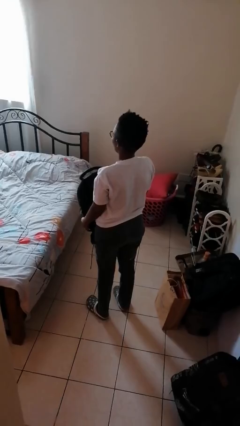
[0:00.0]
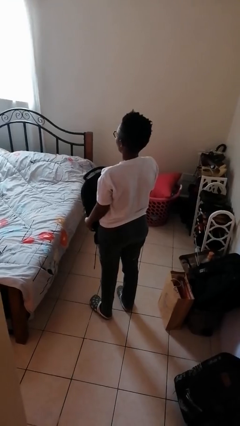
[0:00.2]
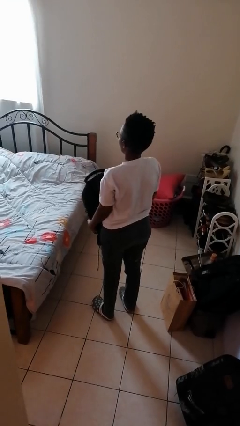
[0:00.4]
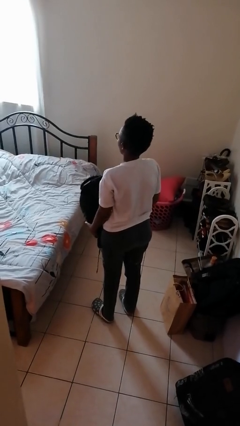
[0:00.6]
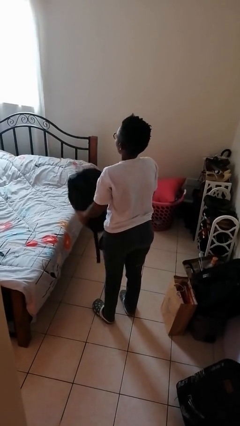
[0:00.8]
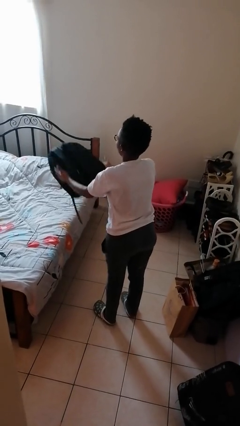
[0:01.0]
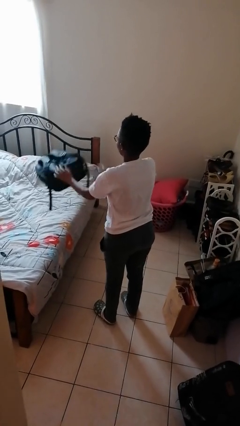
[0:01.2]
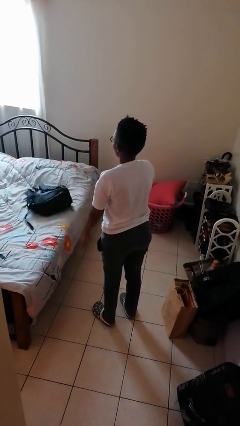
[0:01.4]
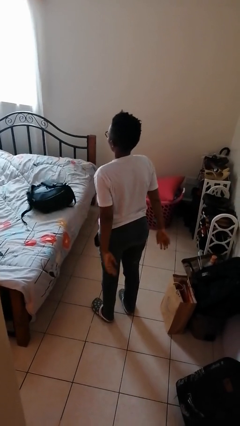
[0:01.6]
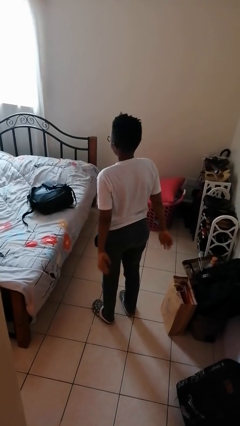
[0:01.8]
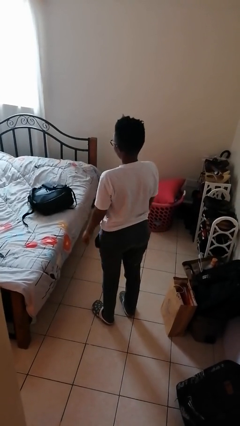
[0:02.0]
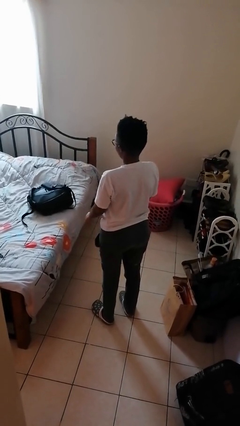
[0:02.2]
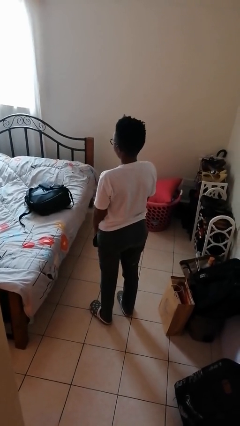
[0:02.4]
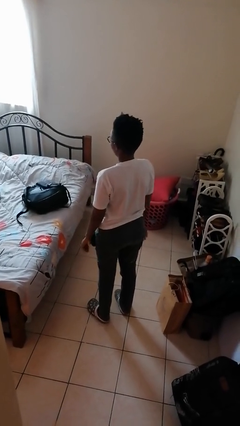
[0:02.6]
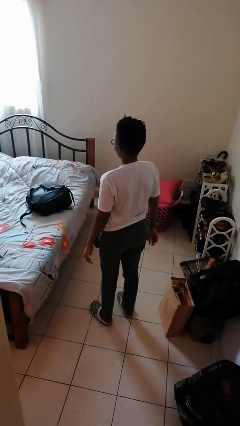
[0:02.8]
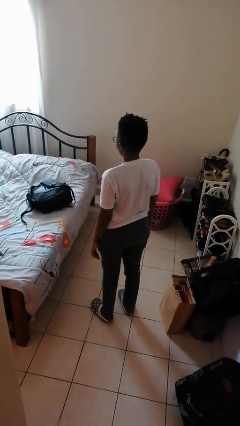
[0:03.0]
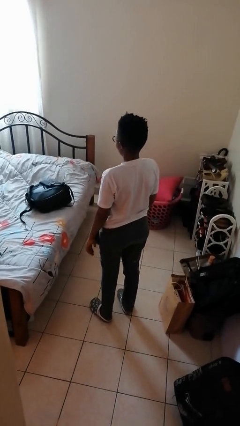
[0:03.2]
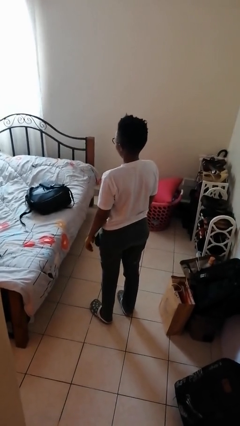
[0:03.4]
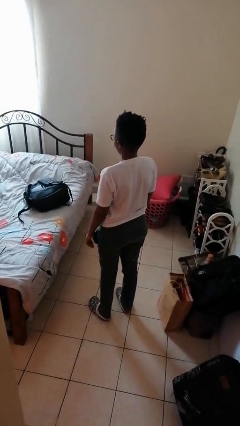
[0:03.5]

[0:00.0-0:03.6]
person throws object on bed

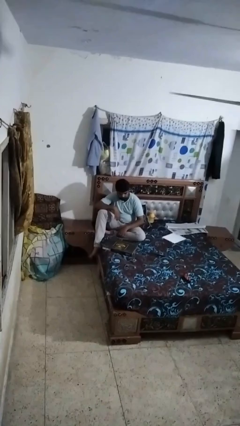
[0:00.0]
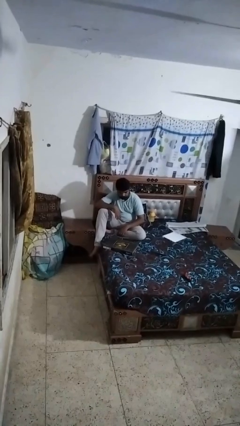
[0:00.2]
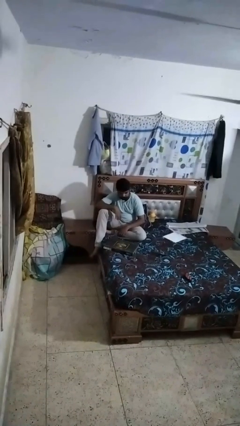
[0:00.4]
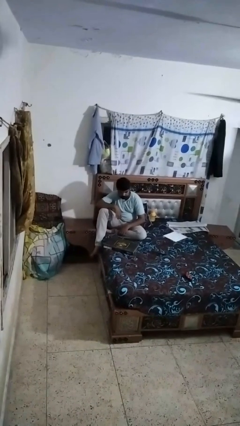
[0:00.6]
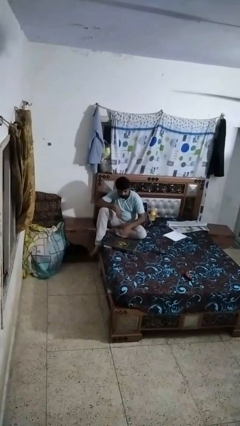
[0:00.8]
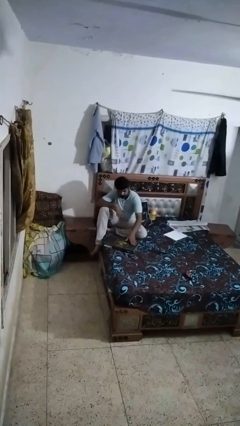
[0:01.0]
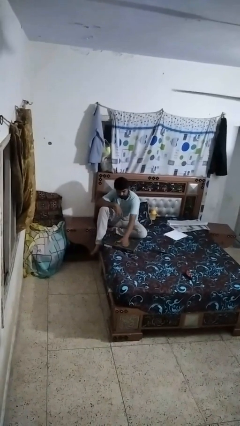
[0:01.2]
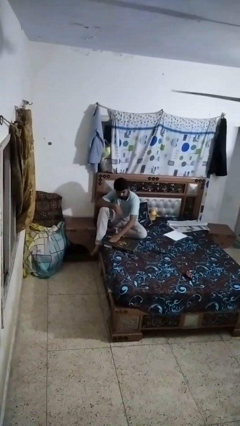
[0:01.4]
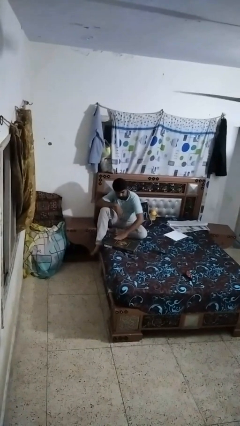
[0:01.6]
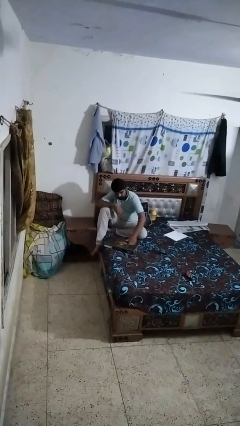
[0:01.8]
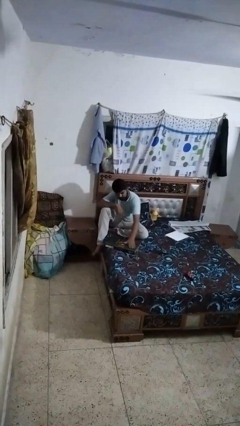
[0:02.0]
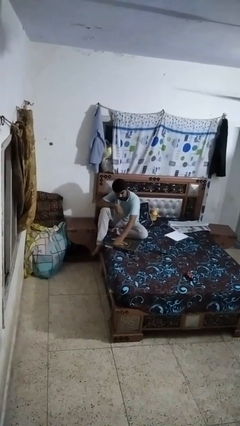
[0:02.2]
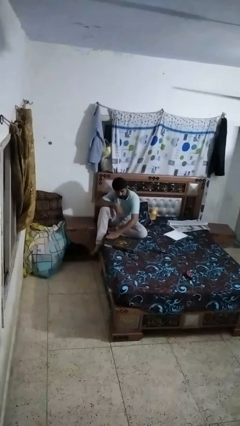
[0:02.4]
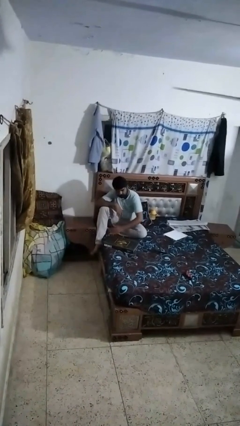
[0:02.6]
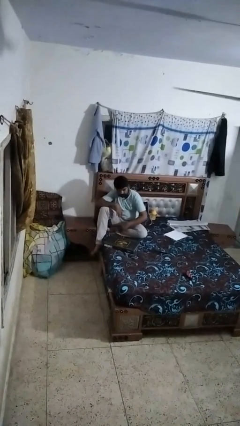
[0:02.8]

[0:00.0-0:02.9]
person waves hand over object

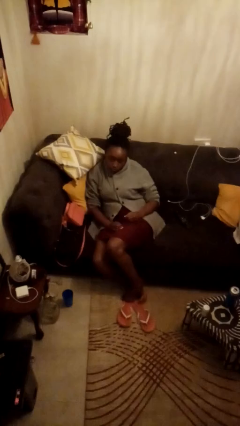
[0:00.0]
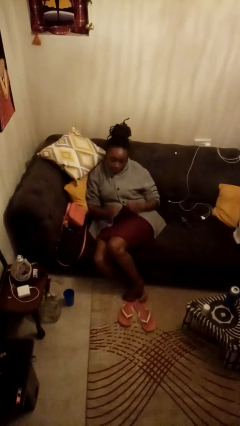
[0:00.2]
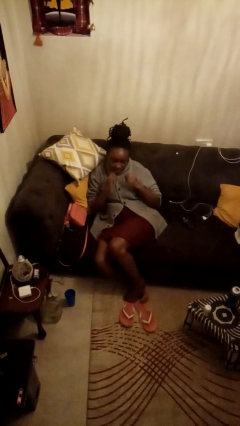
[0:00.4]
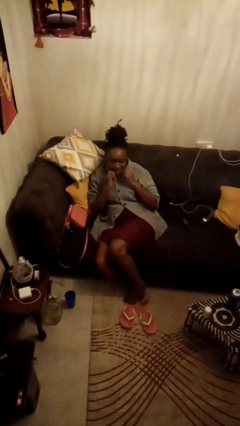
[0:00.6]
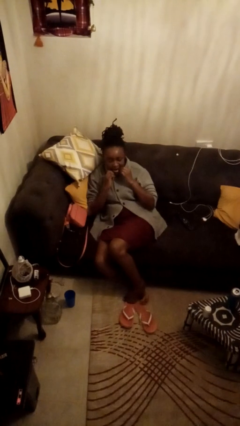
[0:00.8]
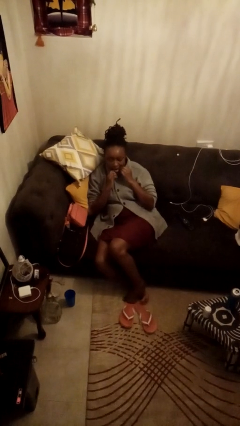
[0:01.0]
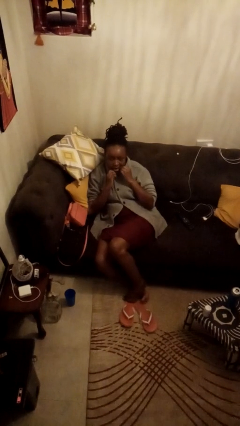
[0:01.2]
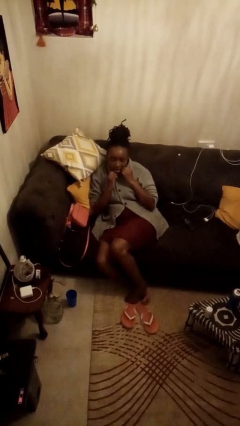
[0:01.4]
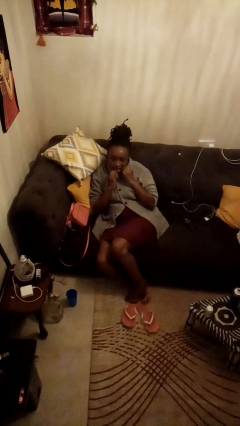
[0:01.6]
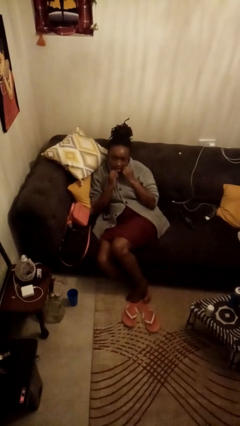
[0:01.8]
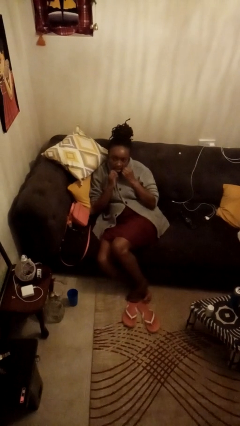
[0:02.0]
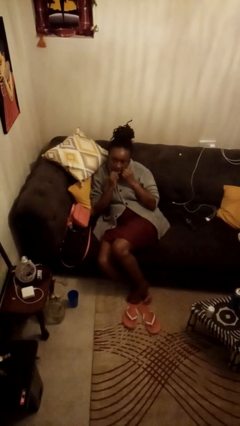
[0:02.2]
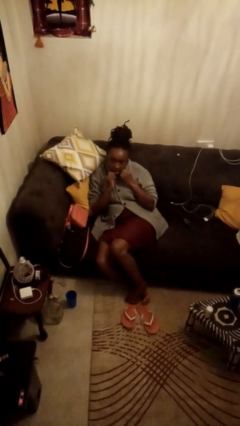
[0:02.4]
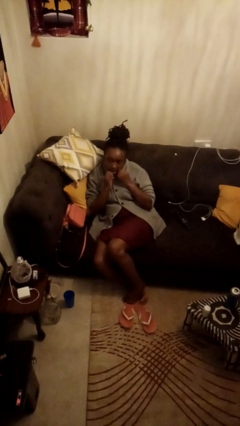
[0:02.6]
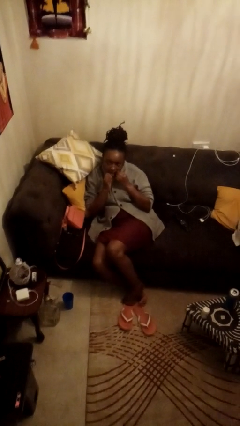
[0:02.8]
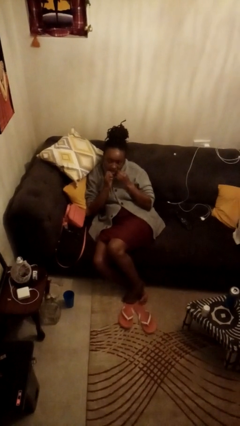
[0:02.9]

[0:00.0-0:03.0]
person flosses

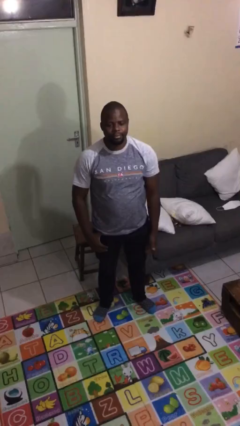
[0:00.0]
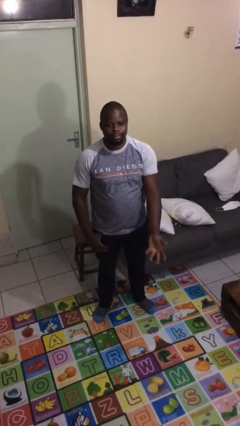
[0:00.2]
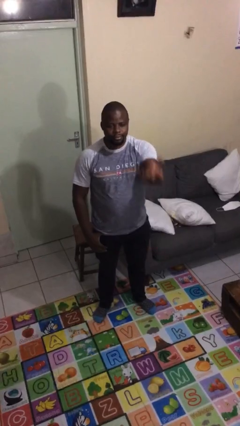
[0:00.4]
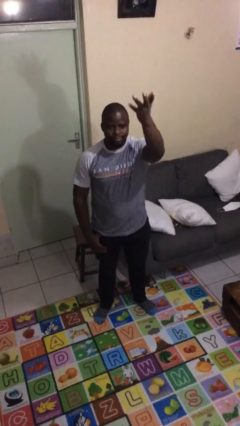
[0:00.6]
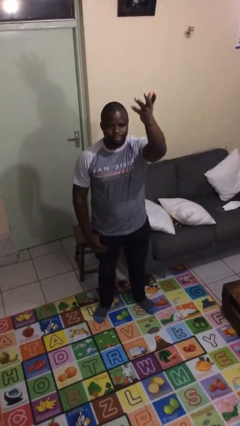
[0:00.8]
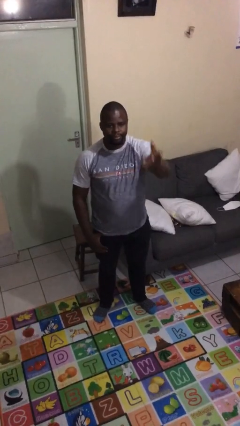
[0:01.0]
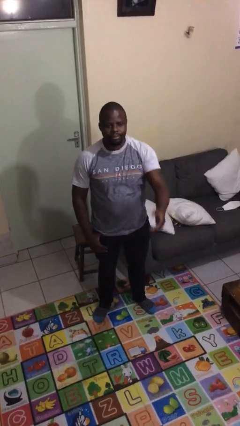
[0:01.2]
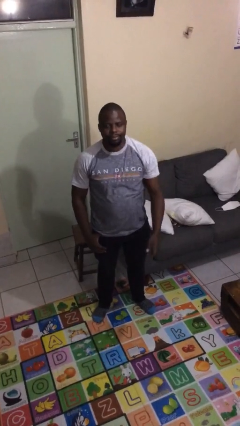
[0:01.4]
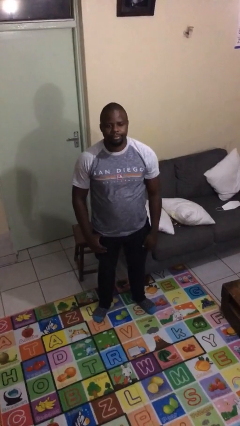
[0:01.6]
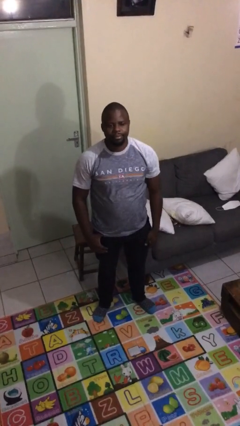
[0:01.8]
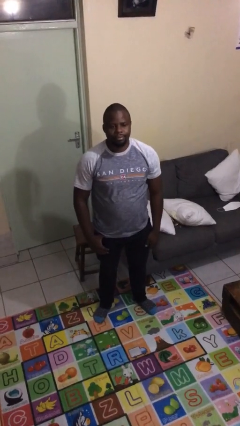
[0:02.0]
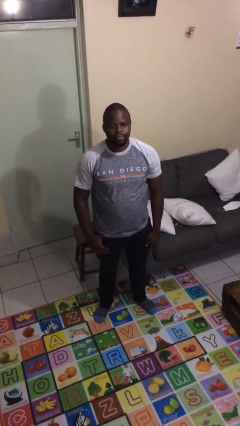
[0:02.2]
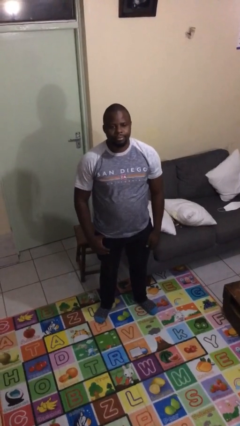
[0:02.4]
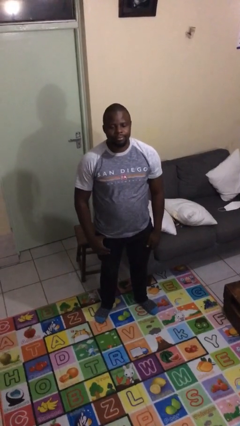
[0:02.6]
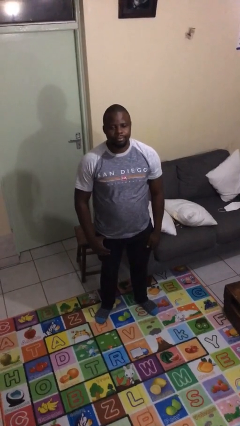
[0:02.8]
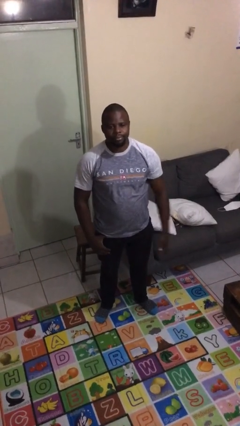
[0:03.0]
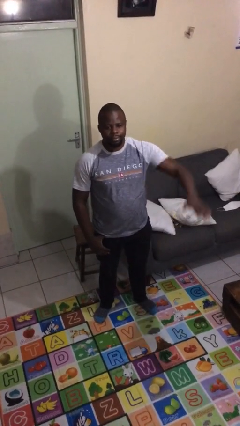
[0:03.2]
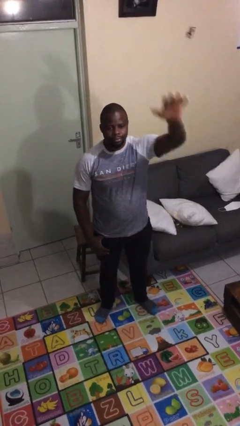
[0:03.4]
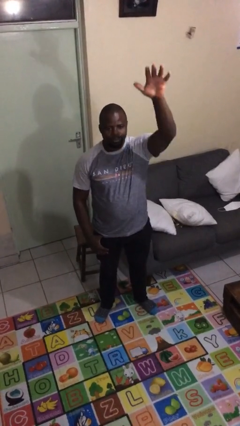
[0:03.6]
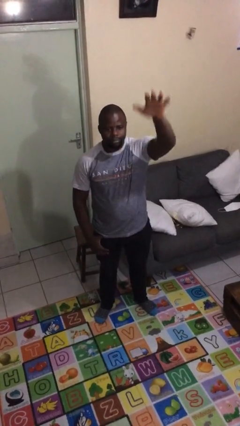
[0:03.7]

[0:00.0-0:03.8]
person gestures swipe up

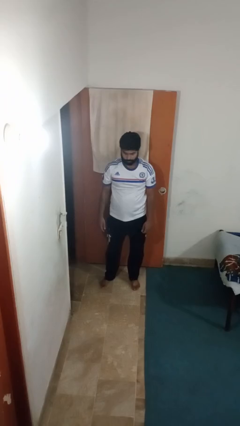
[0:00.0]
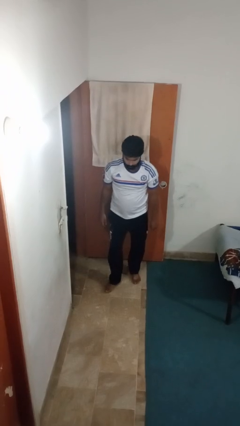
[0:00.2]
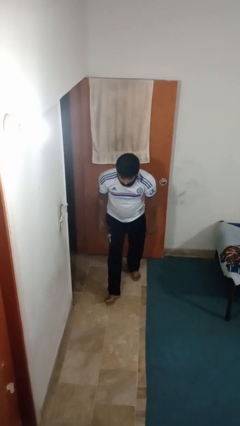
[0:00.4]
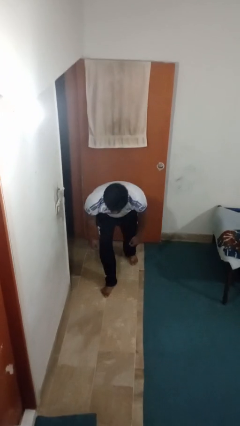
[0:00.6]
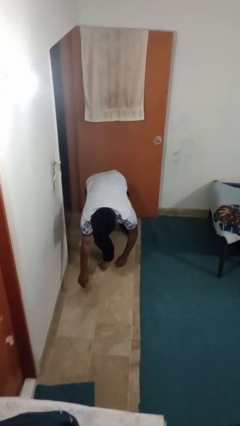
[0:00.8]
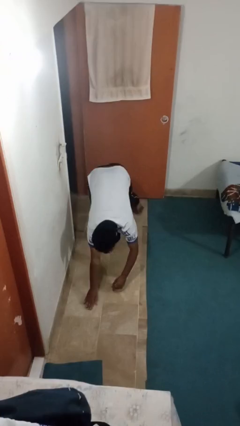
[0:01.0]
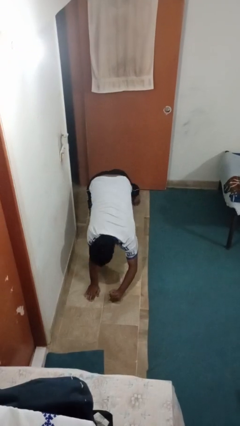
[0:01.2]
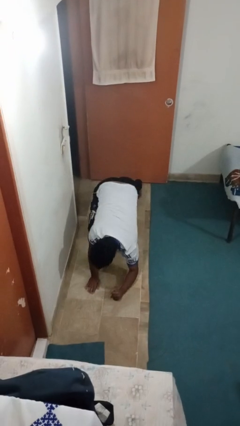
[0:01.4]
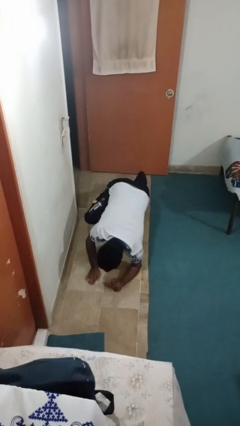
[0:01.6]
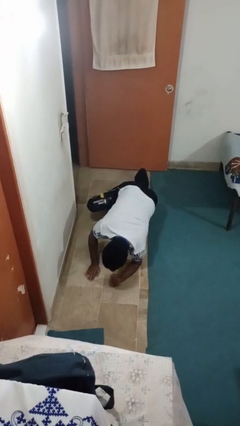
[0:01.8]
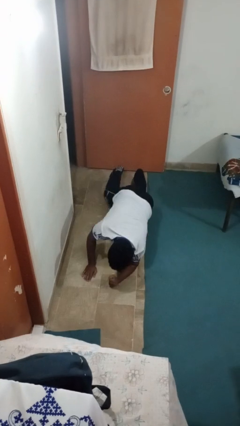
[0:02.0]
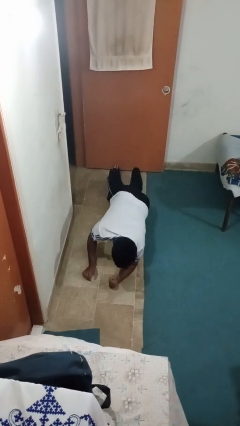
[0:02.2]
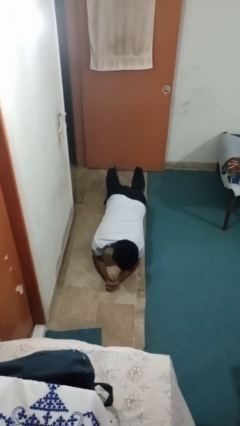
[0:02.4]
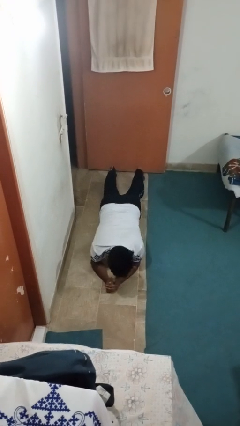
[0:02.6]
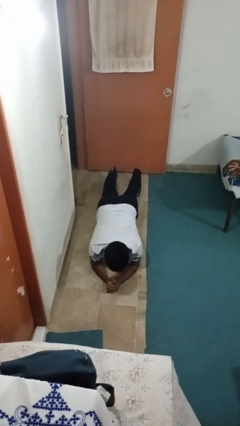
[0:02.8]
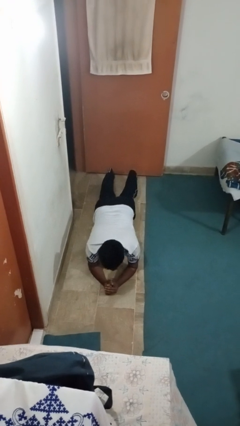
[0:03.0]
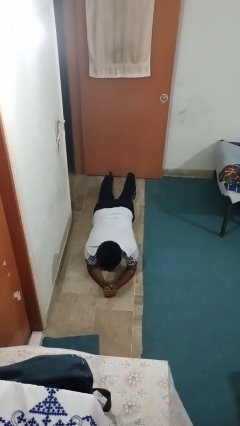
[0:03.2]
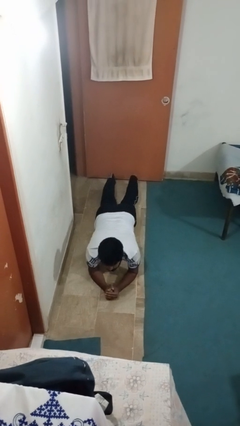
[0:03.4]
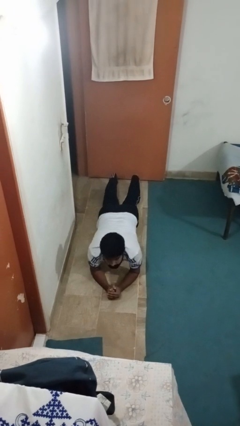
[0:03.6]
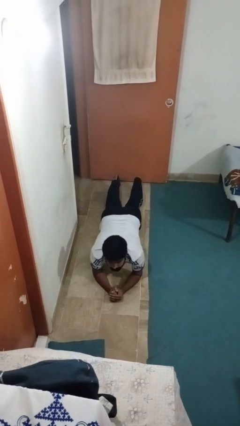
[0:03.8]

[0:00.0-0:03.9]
person exercises with plank

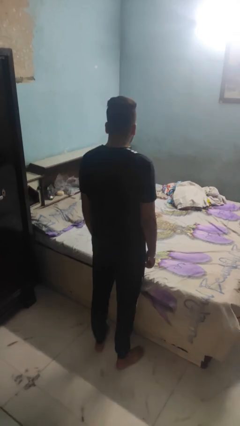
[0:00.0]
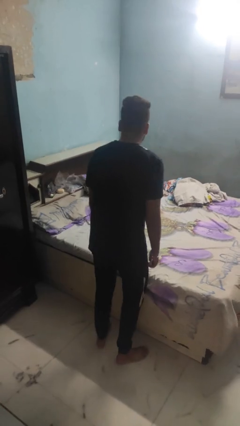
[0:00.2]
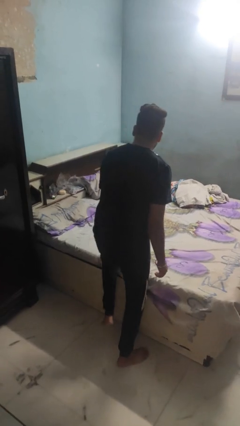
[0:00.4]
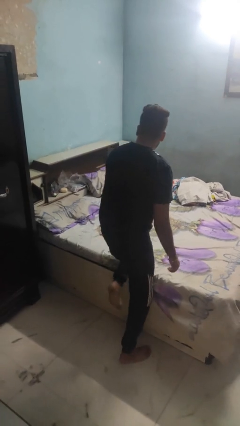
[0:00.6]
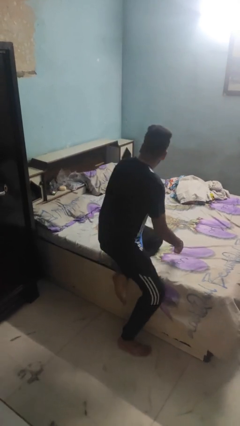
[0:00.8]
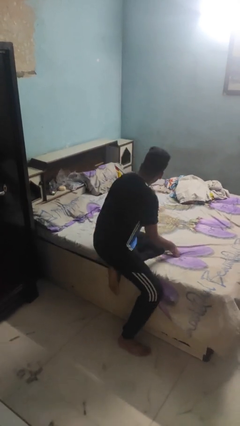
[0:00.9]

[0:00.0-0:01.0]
person lies down on bed
